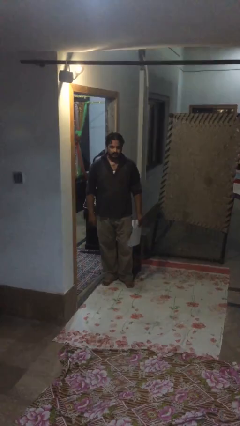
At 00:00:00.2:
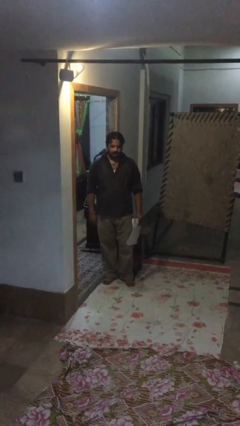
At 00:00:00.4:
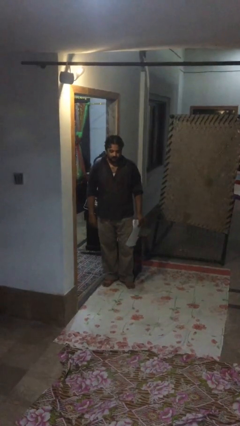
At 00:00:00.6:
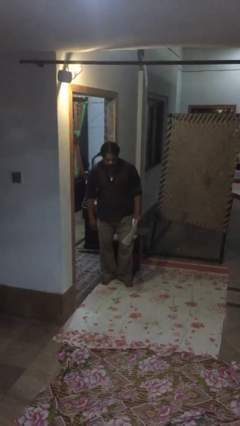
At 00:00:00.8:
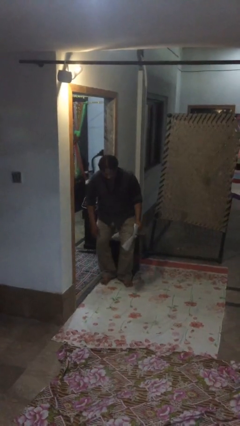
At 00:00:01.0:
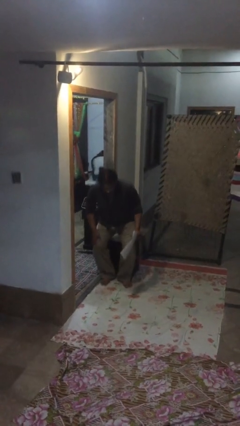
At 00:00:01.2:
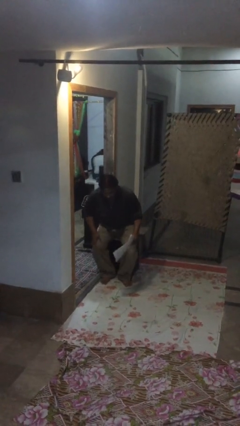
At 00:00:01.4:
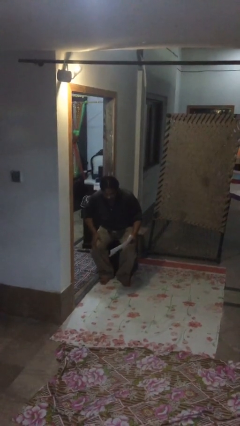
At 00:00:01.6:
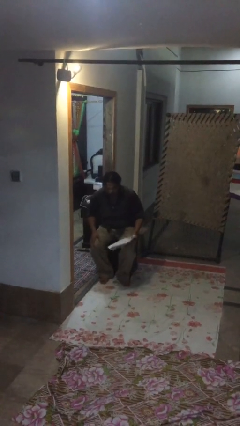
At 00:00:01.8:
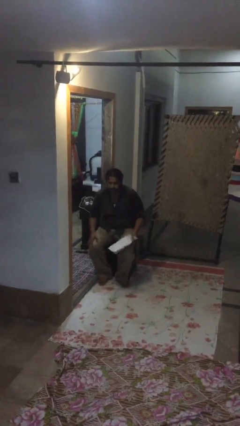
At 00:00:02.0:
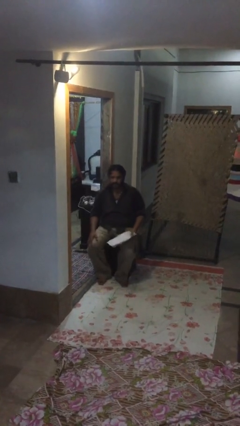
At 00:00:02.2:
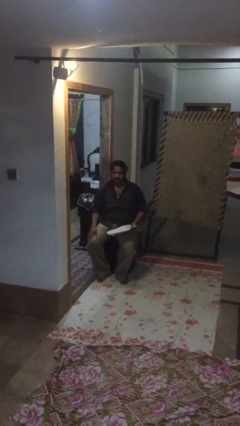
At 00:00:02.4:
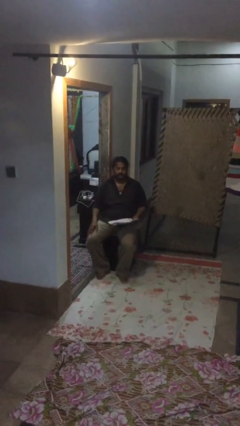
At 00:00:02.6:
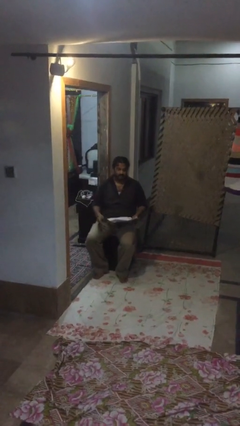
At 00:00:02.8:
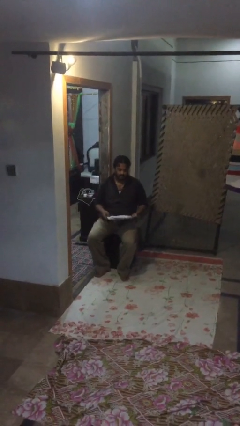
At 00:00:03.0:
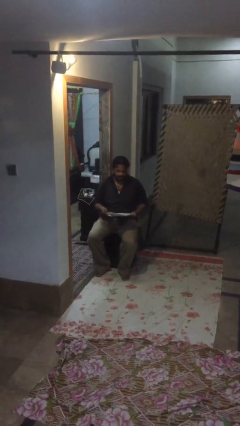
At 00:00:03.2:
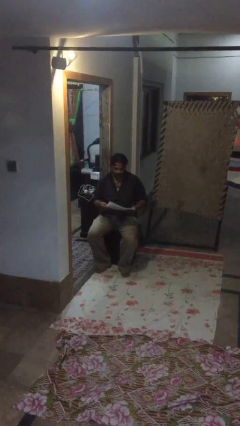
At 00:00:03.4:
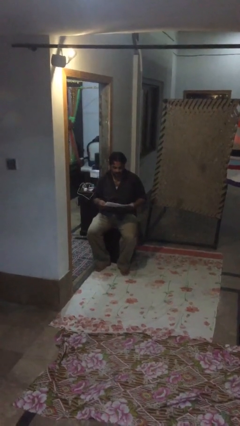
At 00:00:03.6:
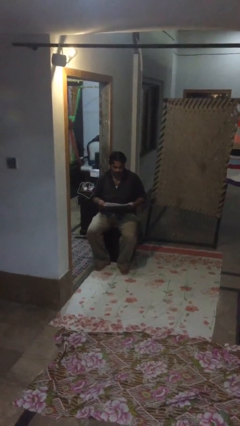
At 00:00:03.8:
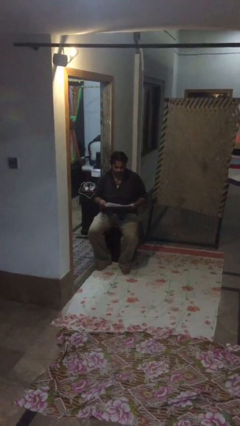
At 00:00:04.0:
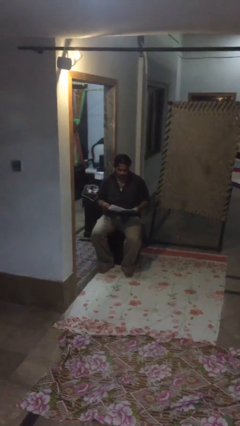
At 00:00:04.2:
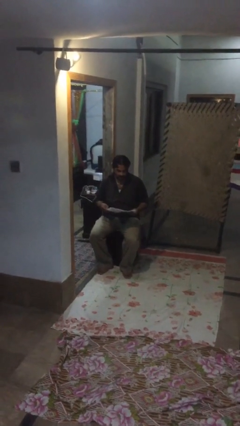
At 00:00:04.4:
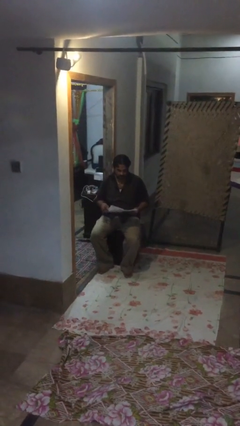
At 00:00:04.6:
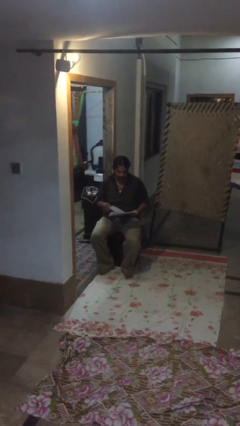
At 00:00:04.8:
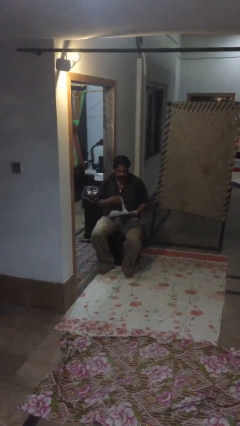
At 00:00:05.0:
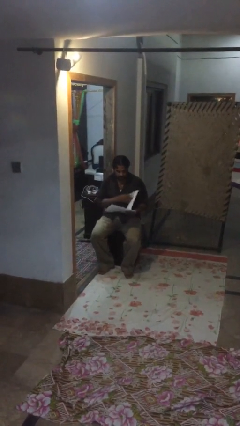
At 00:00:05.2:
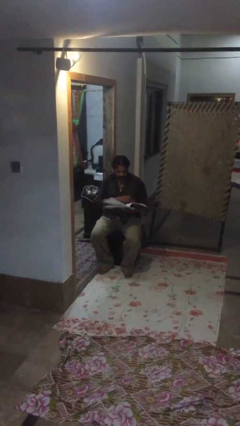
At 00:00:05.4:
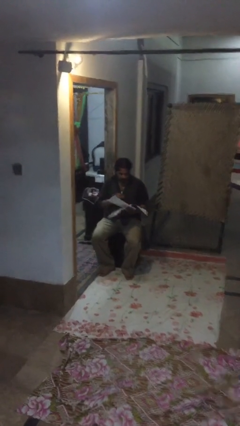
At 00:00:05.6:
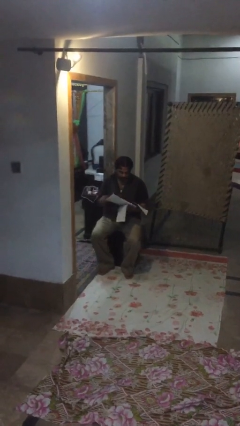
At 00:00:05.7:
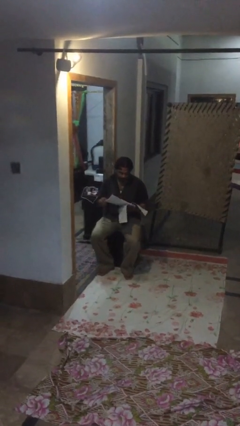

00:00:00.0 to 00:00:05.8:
person sits down

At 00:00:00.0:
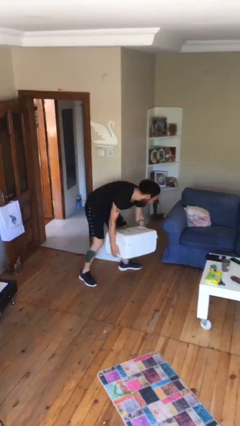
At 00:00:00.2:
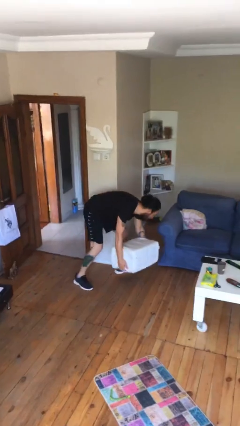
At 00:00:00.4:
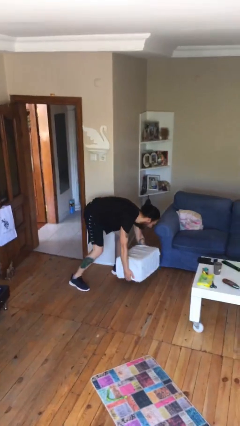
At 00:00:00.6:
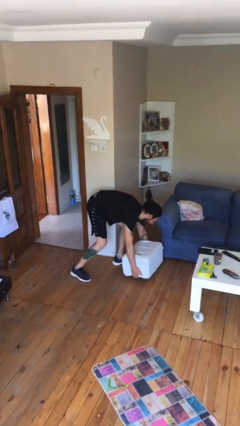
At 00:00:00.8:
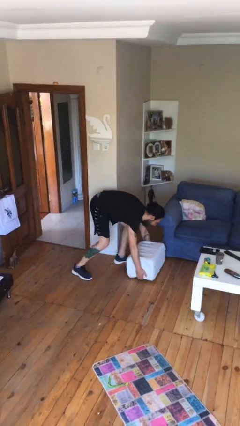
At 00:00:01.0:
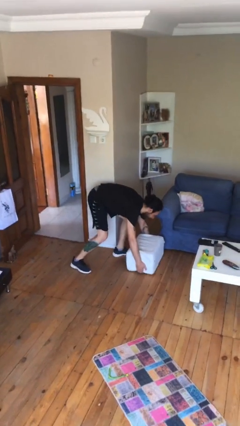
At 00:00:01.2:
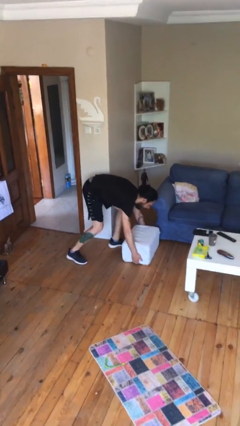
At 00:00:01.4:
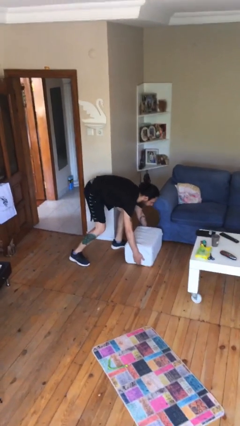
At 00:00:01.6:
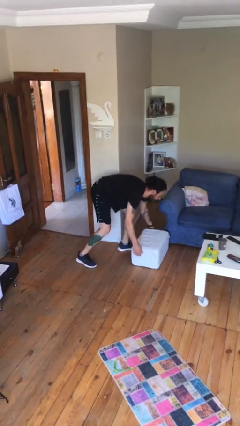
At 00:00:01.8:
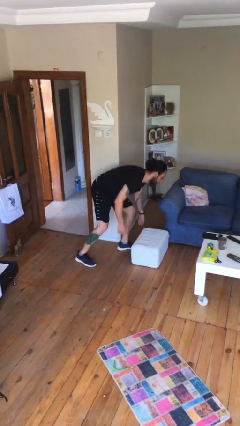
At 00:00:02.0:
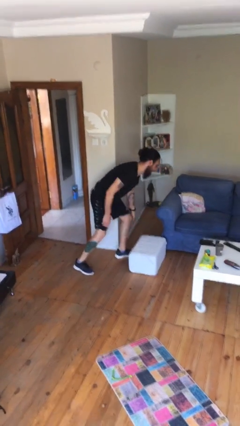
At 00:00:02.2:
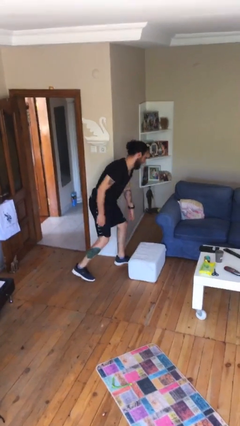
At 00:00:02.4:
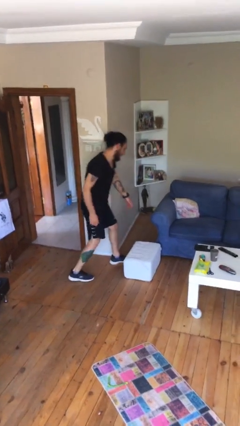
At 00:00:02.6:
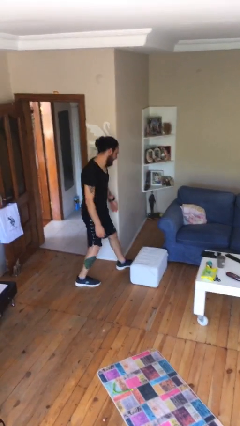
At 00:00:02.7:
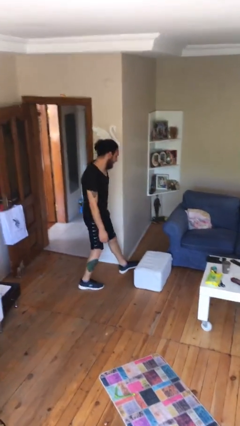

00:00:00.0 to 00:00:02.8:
person puts down object on floor

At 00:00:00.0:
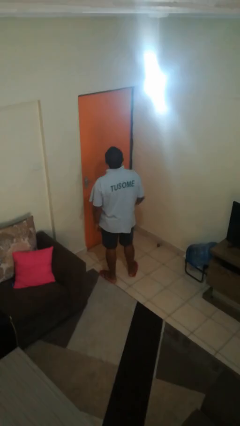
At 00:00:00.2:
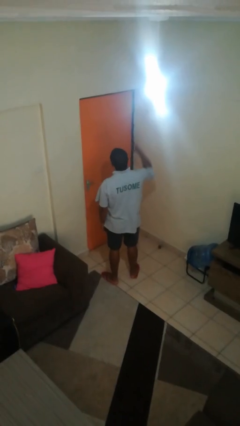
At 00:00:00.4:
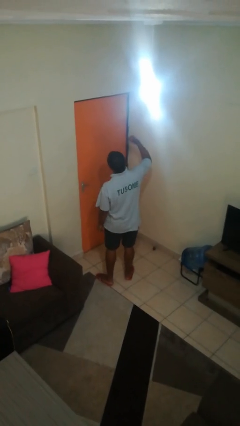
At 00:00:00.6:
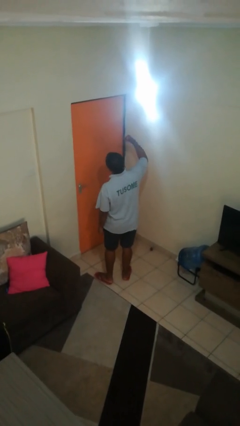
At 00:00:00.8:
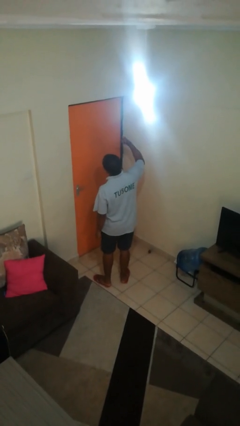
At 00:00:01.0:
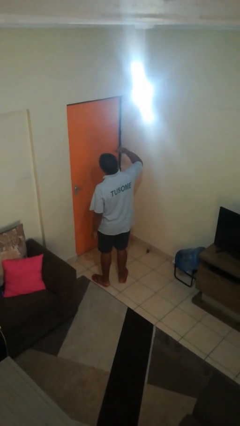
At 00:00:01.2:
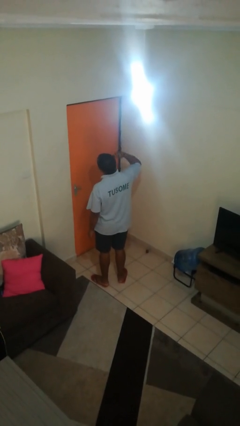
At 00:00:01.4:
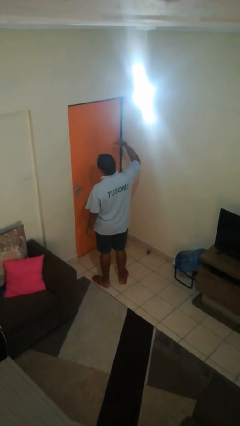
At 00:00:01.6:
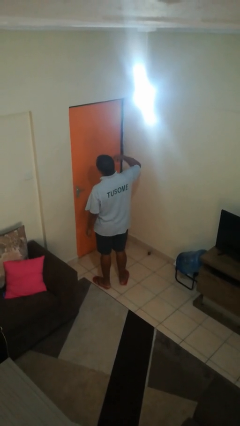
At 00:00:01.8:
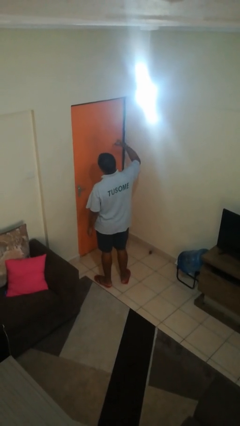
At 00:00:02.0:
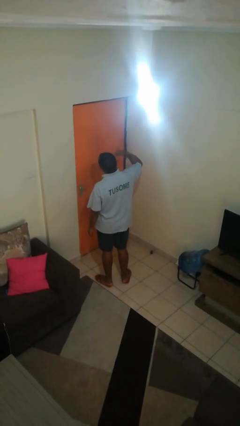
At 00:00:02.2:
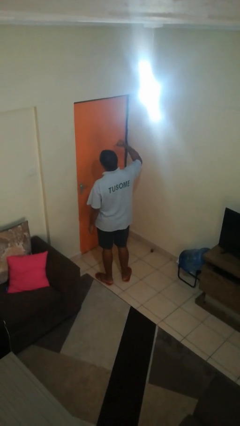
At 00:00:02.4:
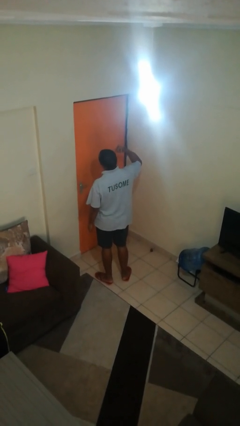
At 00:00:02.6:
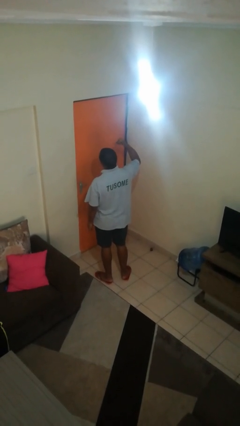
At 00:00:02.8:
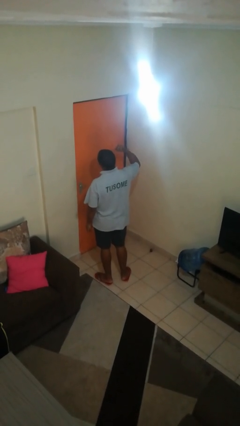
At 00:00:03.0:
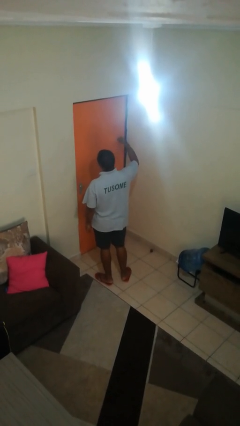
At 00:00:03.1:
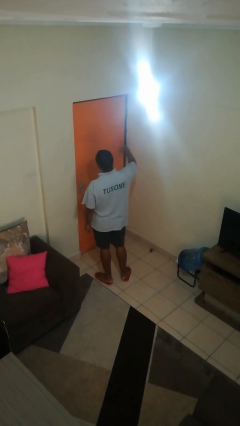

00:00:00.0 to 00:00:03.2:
person gestures call me

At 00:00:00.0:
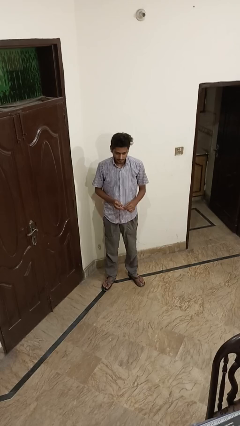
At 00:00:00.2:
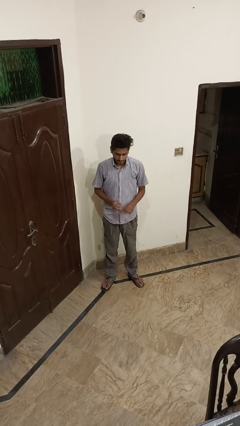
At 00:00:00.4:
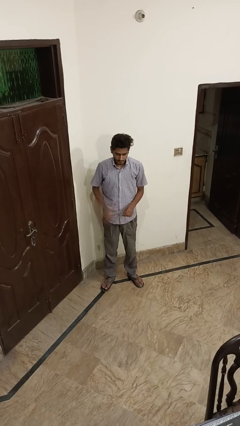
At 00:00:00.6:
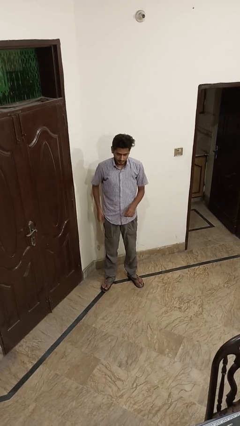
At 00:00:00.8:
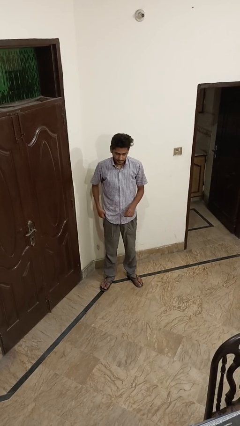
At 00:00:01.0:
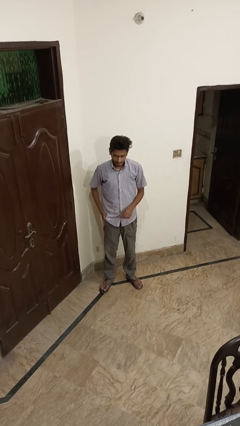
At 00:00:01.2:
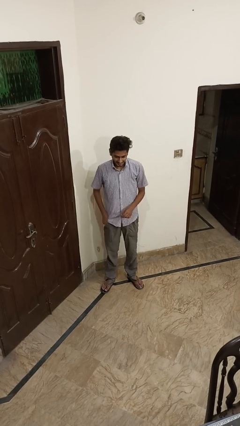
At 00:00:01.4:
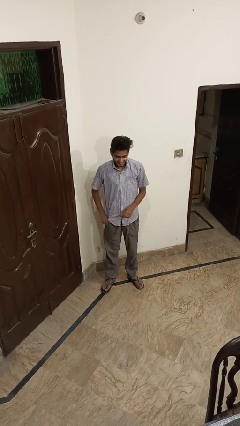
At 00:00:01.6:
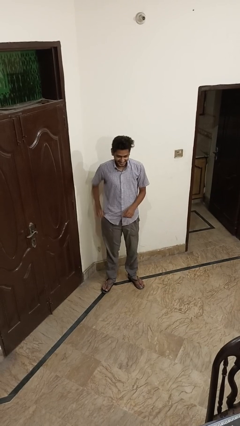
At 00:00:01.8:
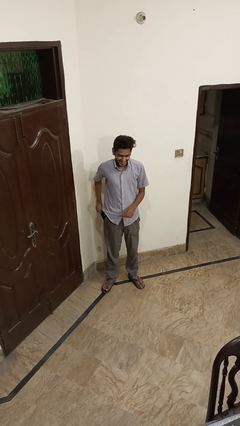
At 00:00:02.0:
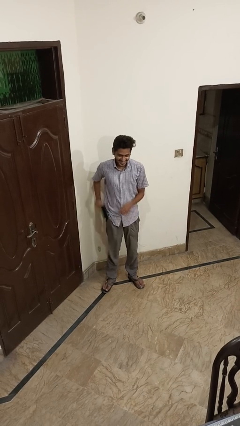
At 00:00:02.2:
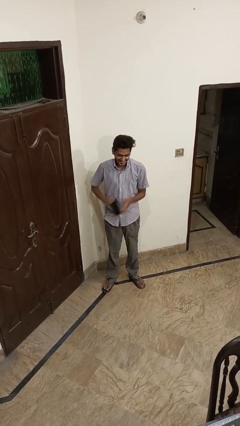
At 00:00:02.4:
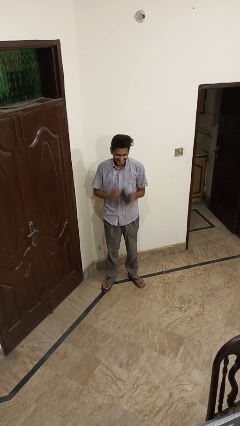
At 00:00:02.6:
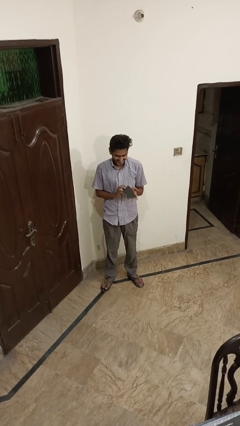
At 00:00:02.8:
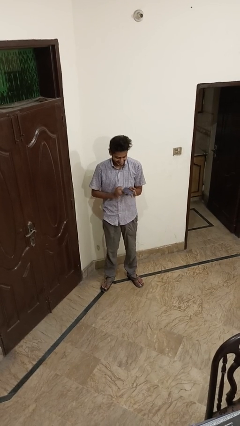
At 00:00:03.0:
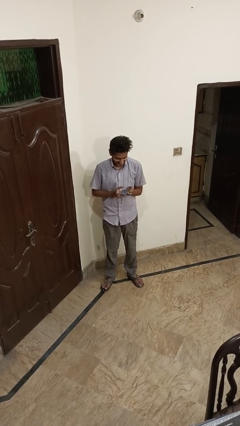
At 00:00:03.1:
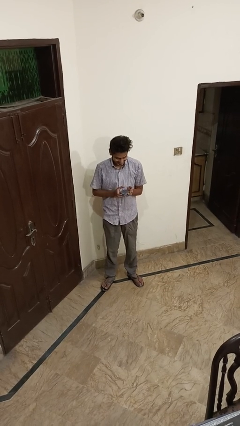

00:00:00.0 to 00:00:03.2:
person takes phone from pocket

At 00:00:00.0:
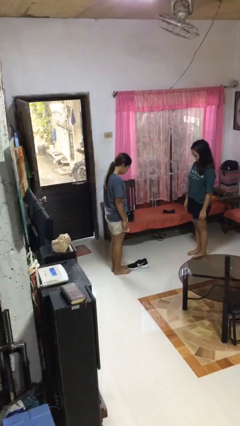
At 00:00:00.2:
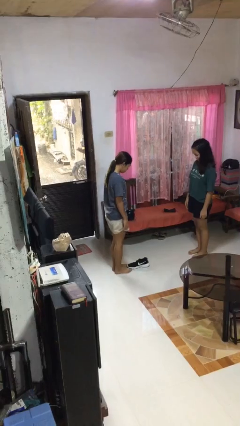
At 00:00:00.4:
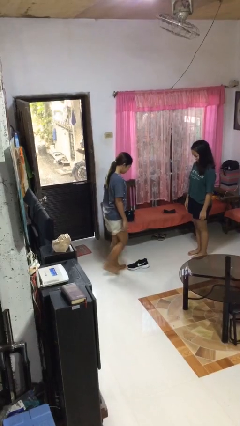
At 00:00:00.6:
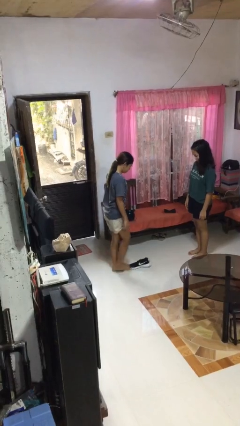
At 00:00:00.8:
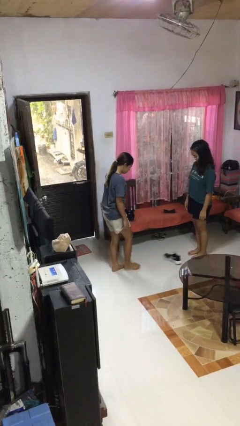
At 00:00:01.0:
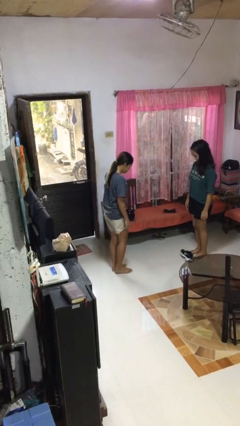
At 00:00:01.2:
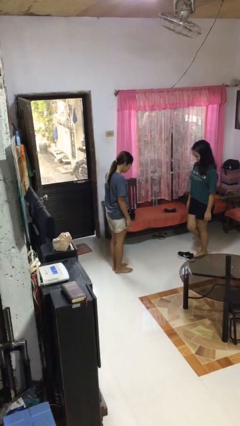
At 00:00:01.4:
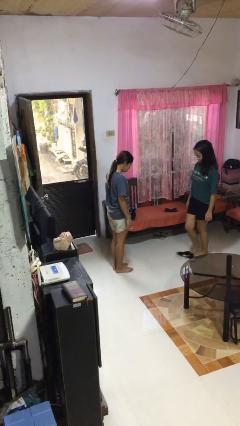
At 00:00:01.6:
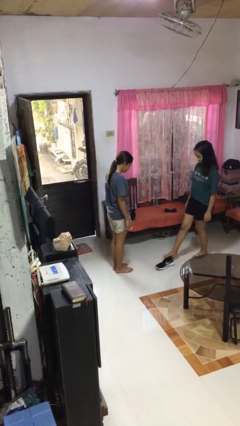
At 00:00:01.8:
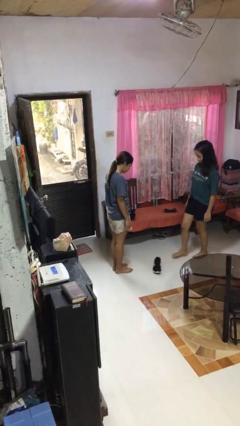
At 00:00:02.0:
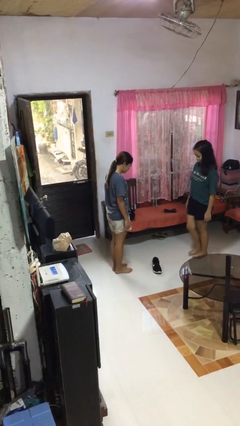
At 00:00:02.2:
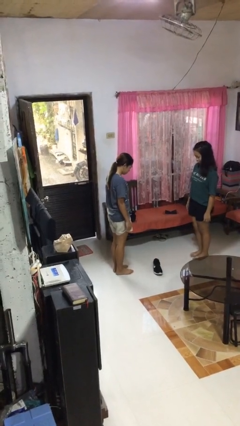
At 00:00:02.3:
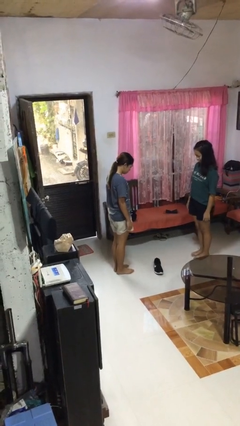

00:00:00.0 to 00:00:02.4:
person kicks object to person
